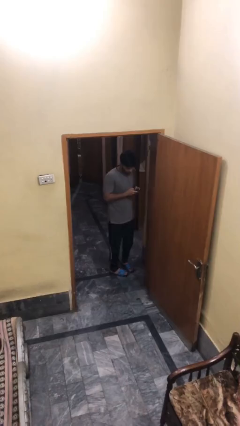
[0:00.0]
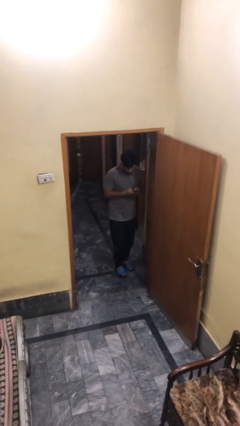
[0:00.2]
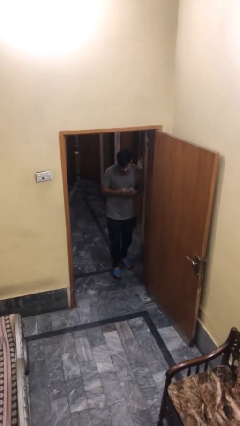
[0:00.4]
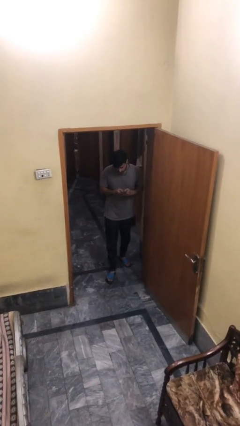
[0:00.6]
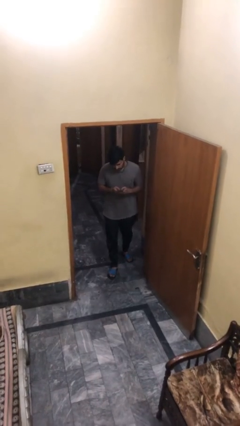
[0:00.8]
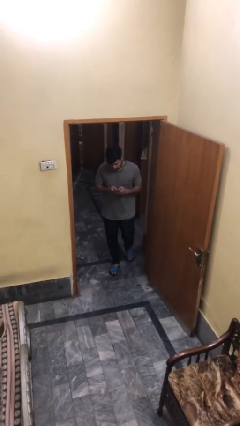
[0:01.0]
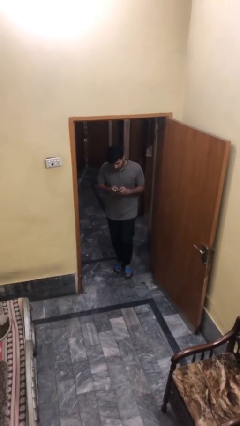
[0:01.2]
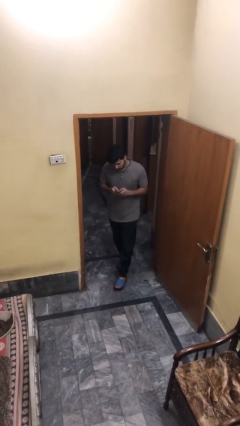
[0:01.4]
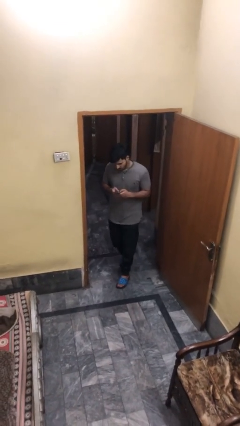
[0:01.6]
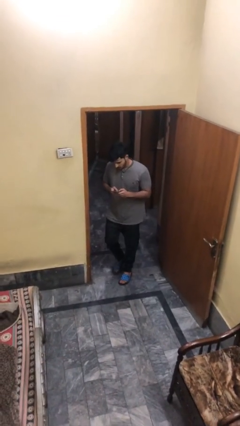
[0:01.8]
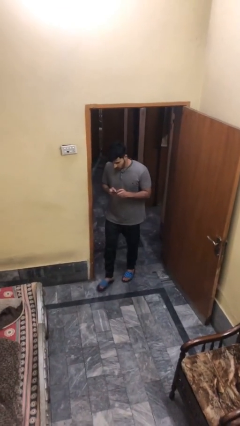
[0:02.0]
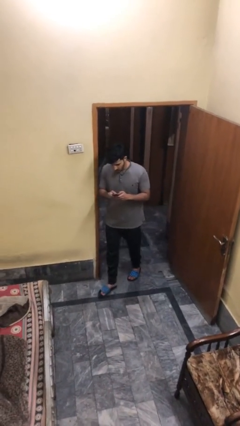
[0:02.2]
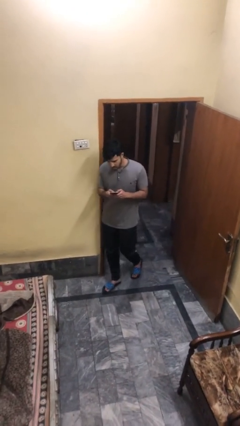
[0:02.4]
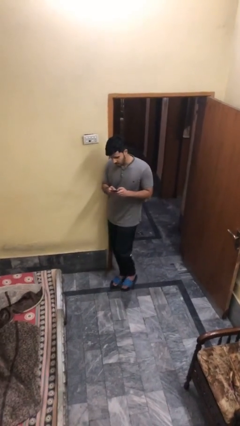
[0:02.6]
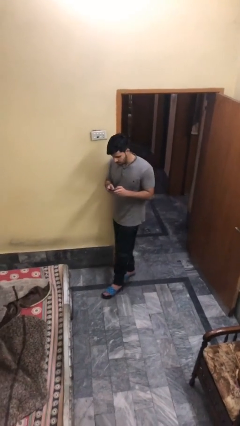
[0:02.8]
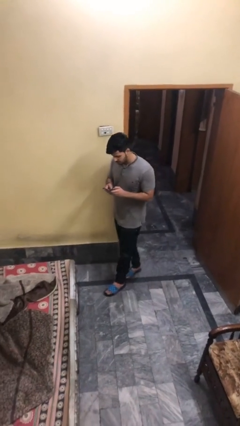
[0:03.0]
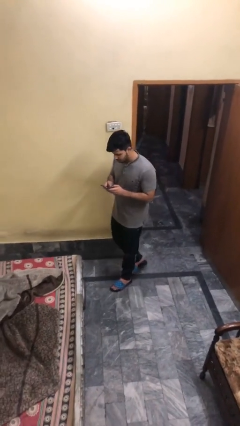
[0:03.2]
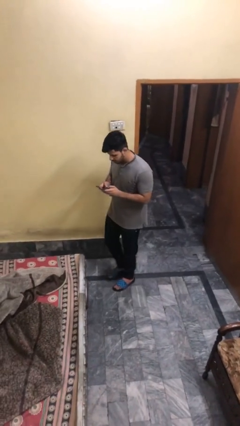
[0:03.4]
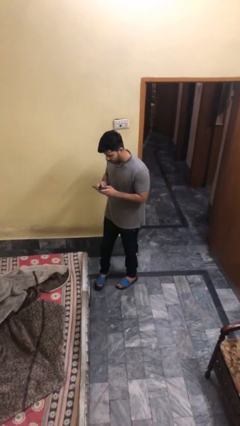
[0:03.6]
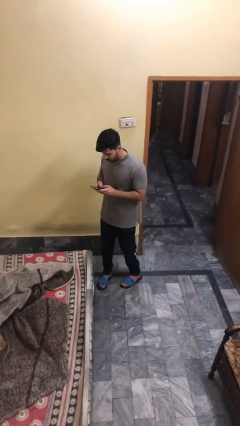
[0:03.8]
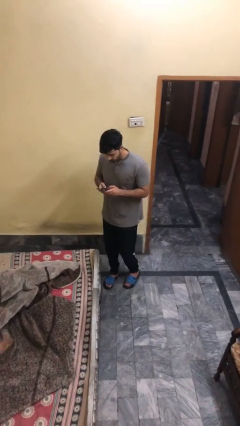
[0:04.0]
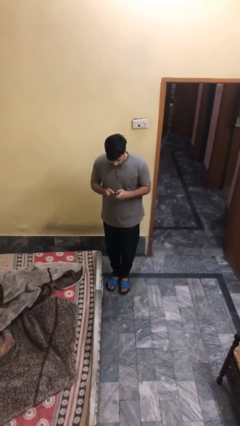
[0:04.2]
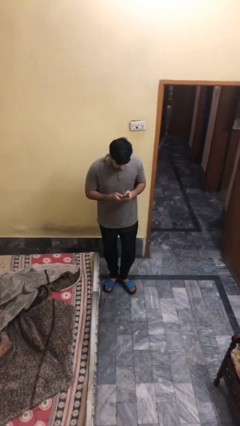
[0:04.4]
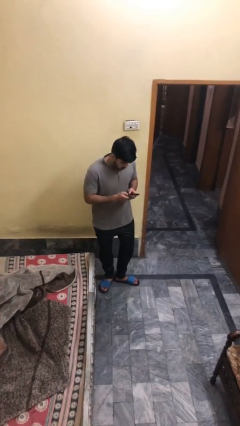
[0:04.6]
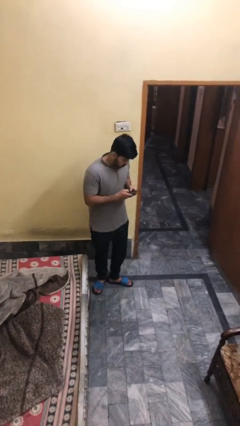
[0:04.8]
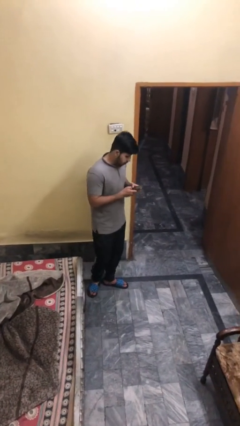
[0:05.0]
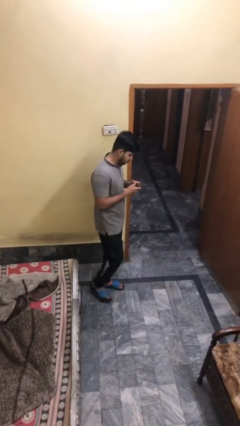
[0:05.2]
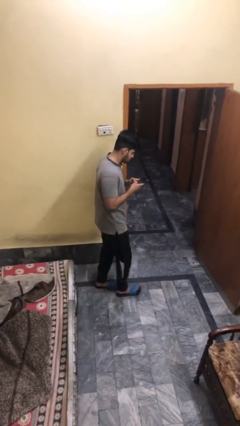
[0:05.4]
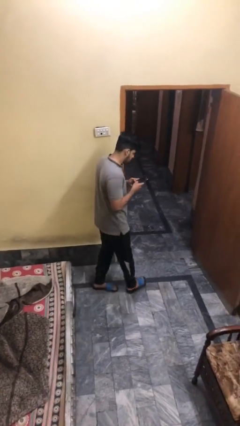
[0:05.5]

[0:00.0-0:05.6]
person enters scene through structure

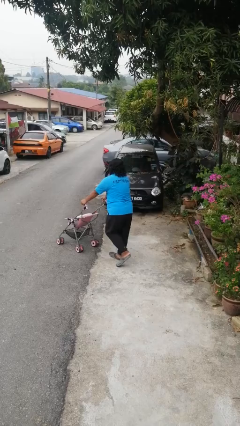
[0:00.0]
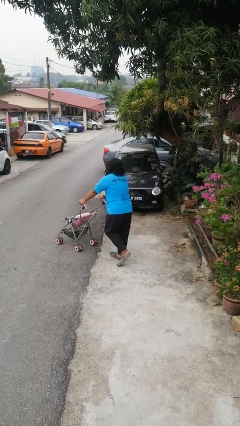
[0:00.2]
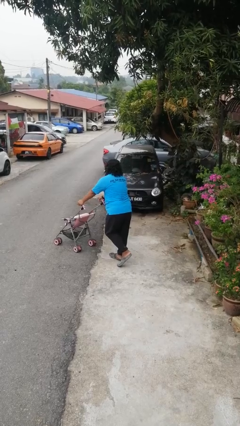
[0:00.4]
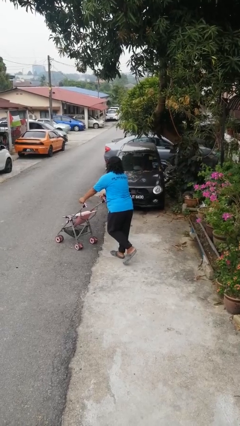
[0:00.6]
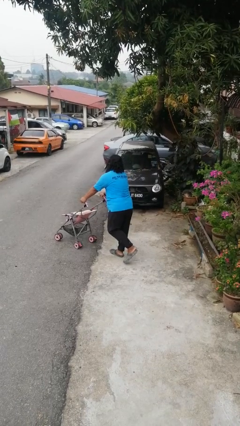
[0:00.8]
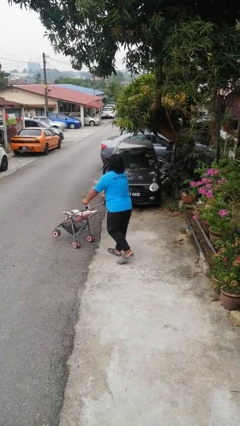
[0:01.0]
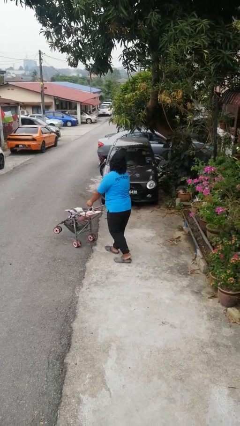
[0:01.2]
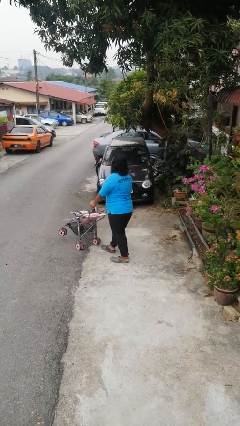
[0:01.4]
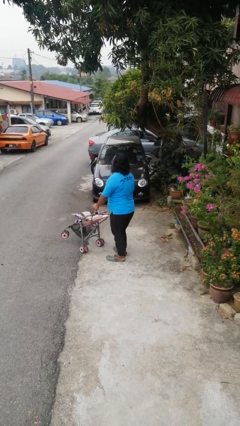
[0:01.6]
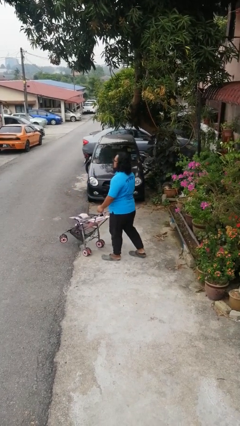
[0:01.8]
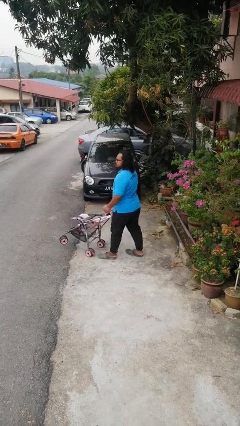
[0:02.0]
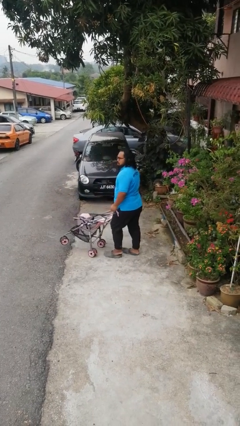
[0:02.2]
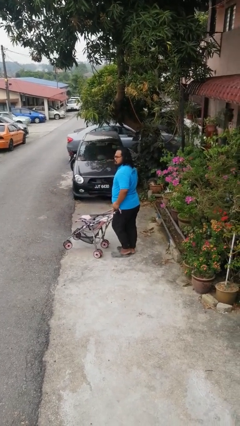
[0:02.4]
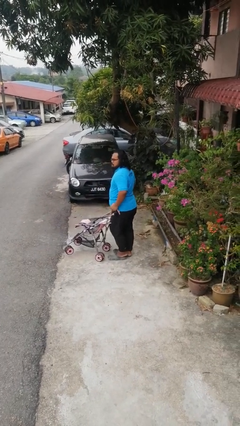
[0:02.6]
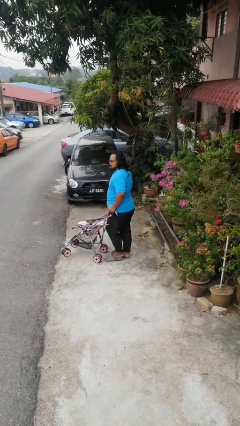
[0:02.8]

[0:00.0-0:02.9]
person pulls wheeled cart

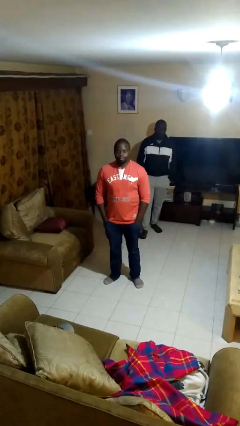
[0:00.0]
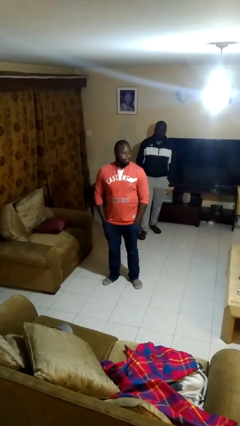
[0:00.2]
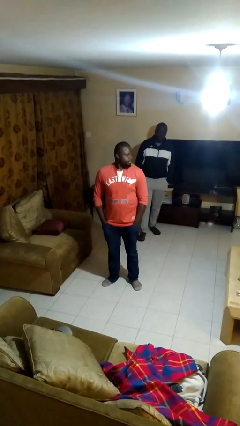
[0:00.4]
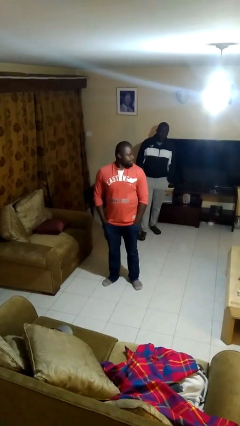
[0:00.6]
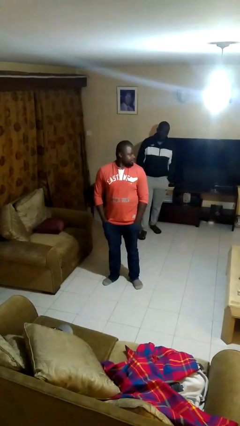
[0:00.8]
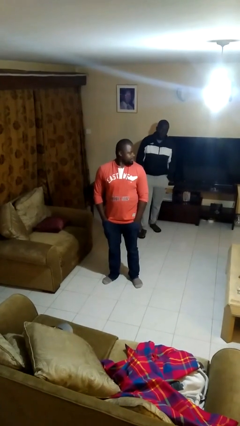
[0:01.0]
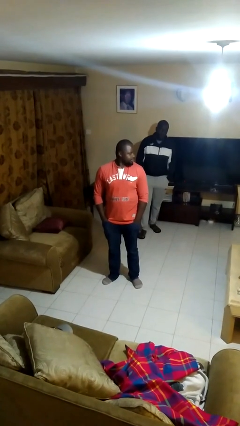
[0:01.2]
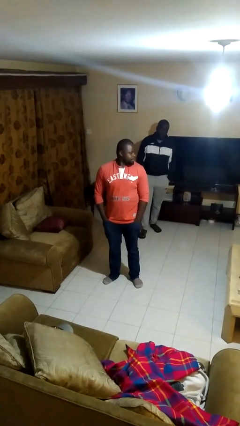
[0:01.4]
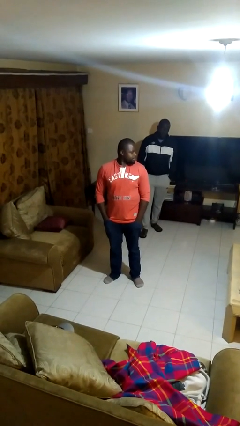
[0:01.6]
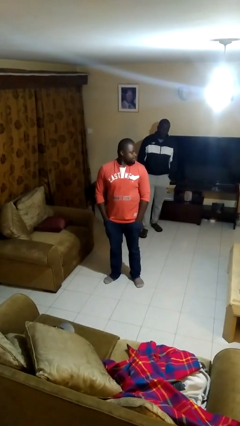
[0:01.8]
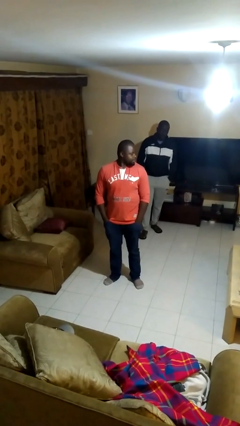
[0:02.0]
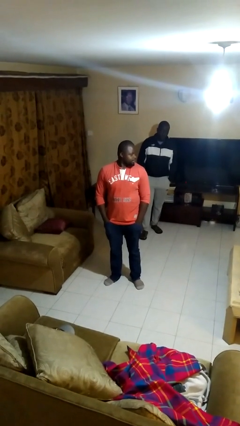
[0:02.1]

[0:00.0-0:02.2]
person looks over shoulder

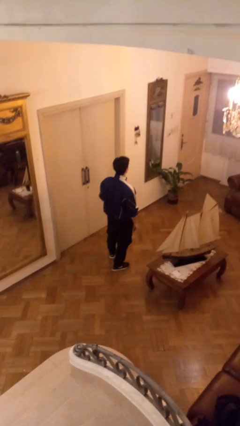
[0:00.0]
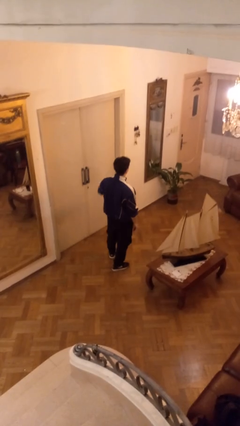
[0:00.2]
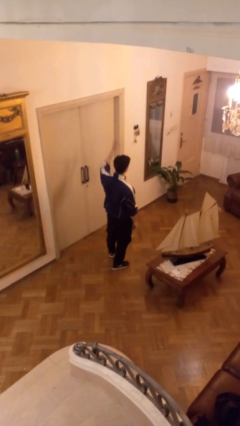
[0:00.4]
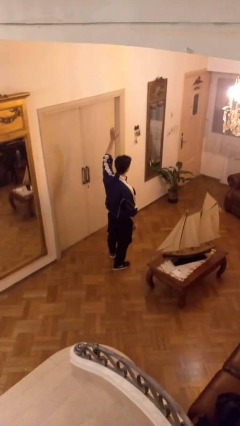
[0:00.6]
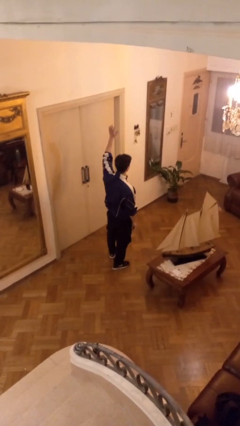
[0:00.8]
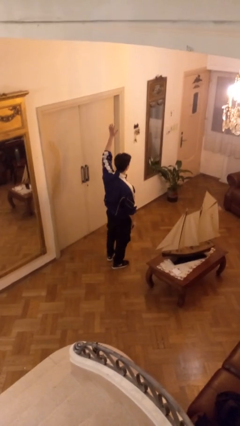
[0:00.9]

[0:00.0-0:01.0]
person gestures raise hand

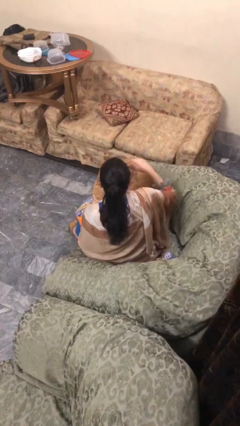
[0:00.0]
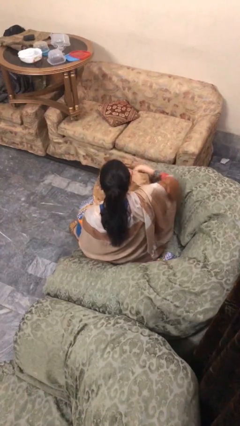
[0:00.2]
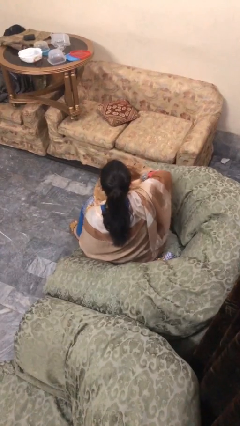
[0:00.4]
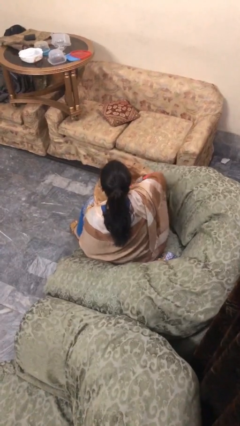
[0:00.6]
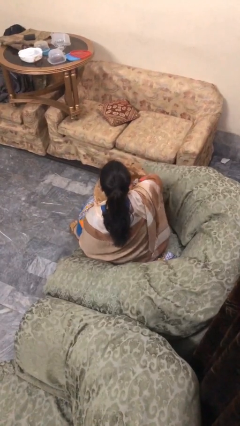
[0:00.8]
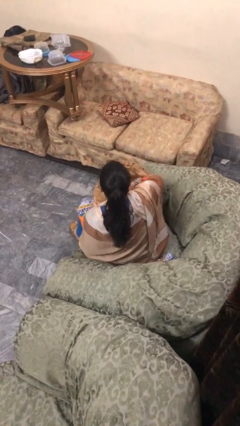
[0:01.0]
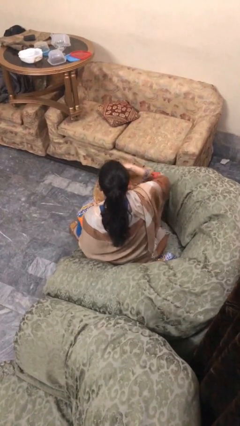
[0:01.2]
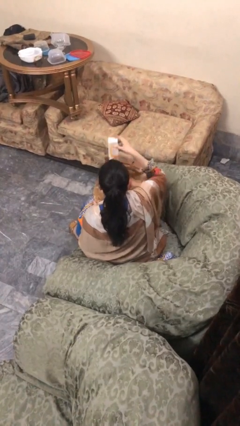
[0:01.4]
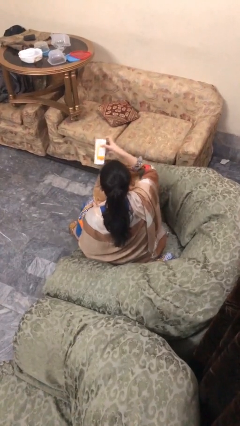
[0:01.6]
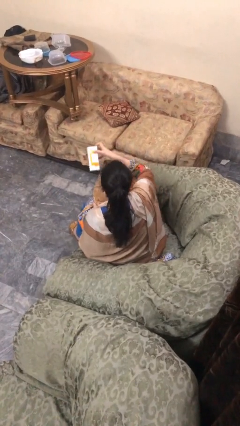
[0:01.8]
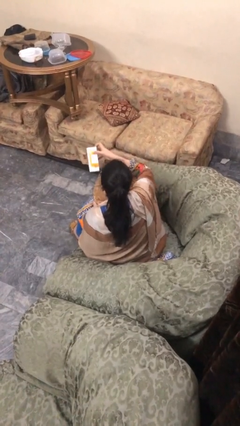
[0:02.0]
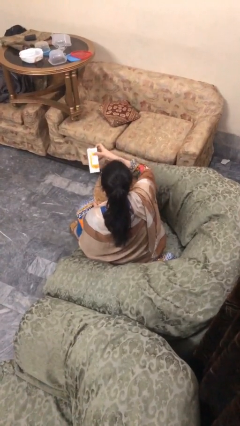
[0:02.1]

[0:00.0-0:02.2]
person takes object from bag

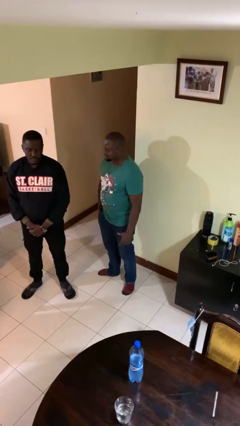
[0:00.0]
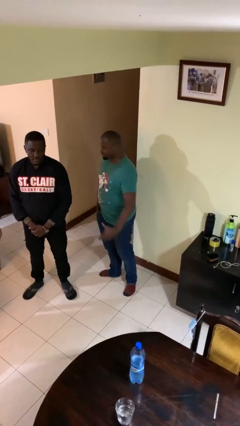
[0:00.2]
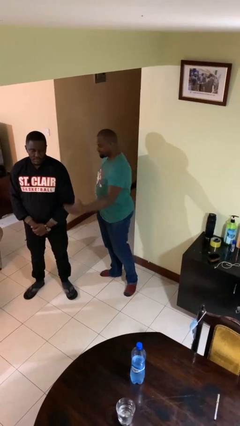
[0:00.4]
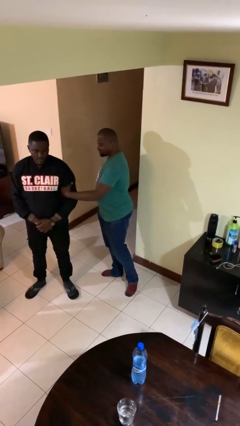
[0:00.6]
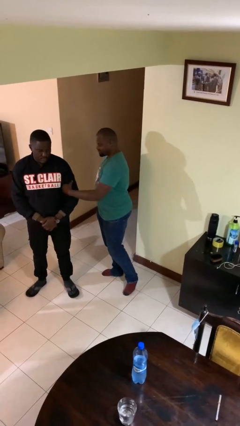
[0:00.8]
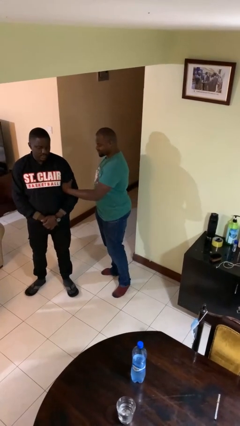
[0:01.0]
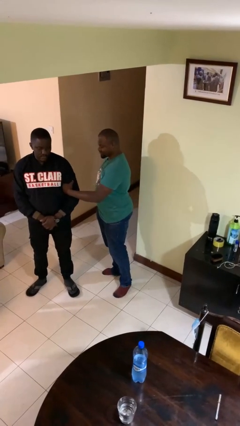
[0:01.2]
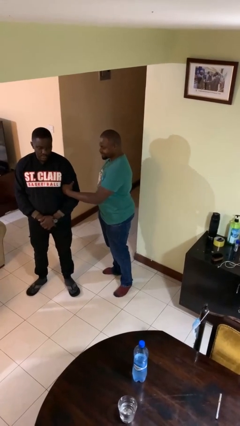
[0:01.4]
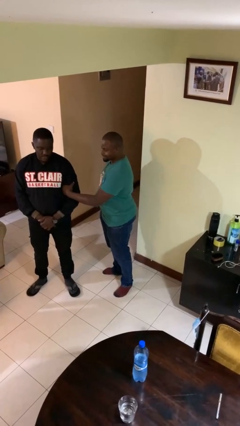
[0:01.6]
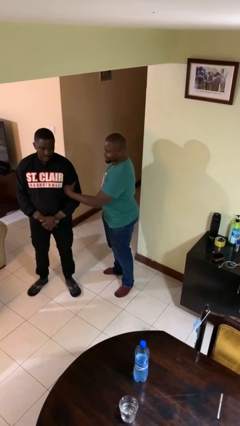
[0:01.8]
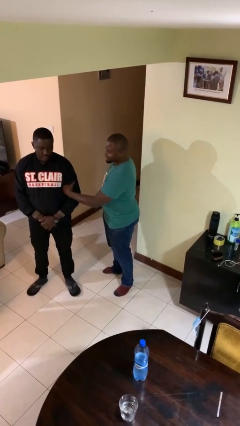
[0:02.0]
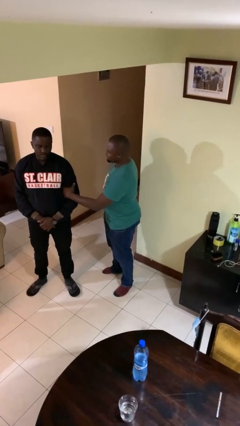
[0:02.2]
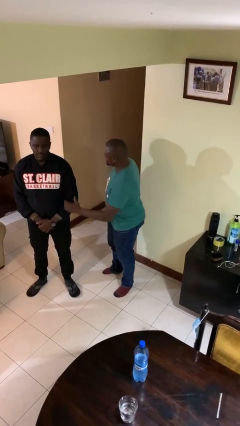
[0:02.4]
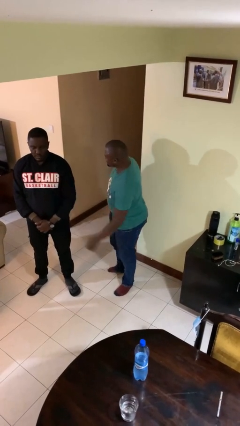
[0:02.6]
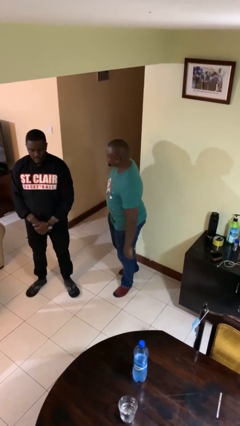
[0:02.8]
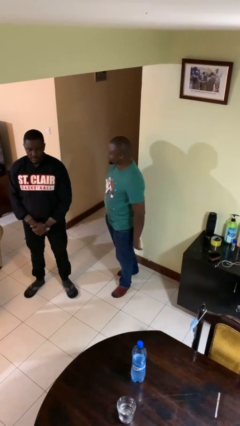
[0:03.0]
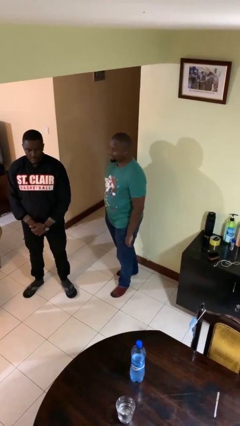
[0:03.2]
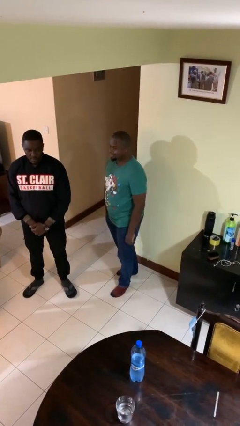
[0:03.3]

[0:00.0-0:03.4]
person grabs person by bicep

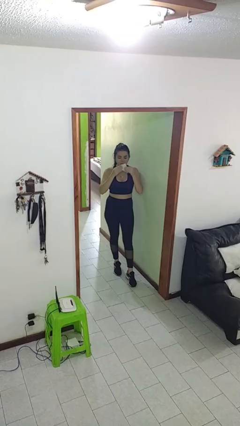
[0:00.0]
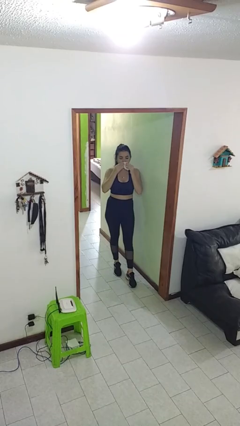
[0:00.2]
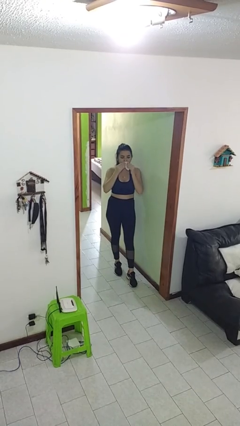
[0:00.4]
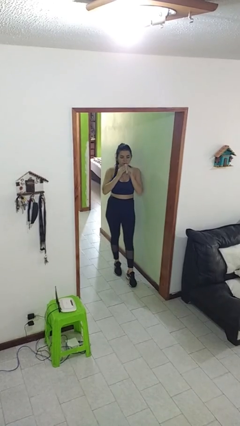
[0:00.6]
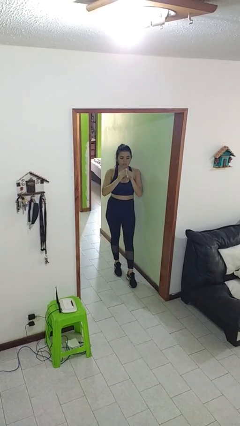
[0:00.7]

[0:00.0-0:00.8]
person wipes mouth with napkin
